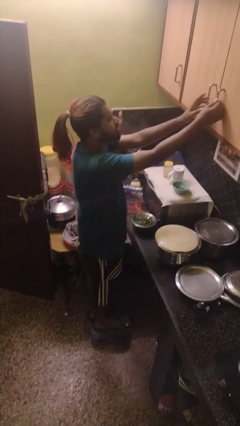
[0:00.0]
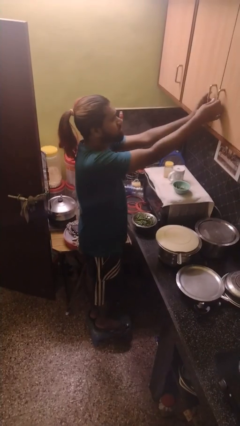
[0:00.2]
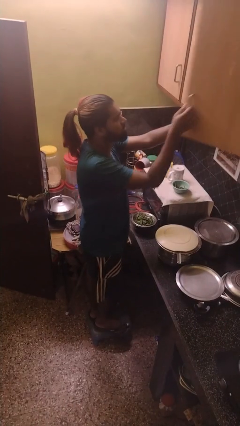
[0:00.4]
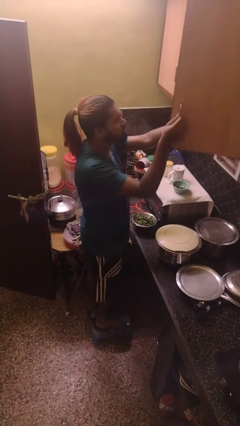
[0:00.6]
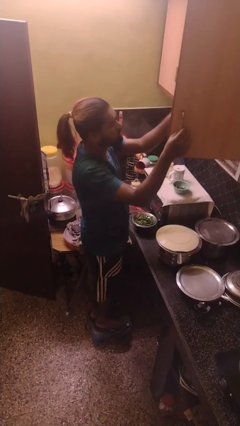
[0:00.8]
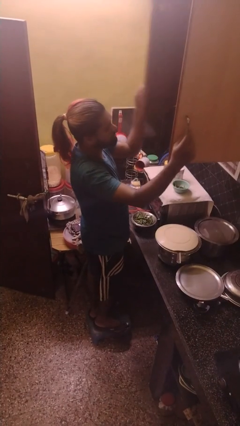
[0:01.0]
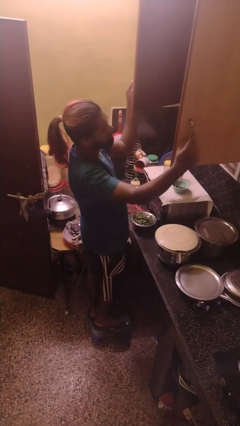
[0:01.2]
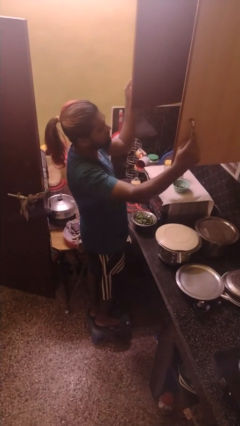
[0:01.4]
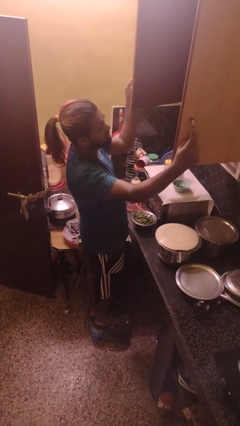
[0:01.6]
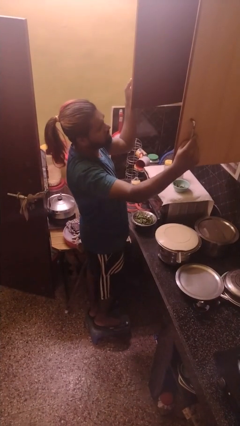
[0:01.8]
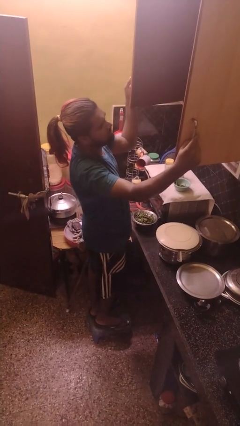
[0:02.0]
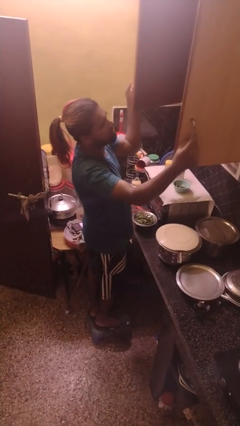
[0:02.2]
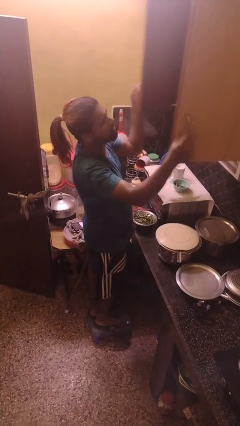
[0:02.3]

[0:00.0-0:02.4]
person opens cabinet

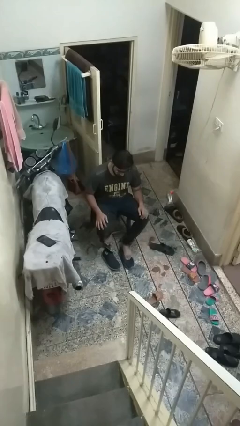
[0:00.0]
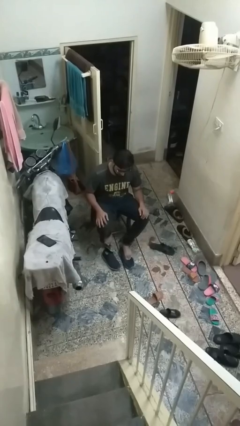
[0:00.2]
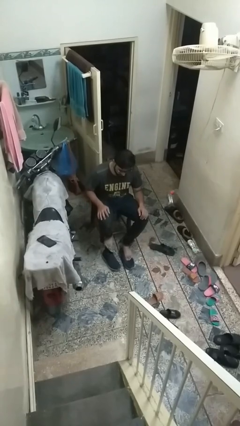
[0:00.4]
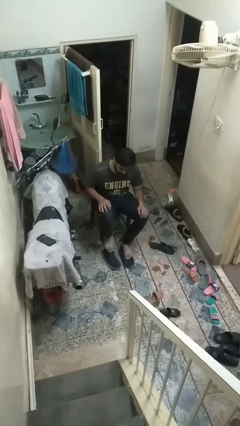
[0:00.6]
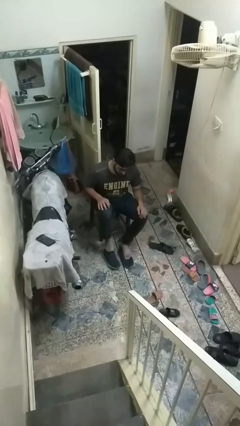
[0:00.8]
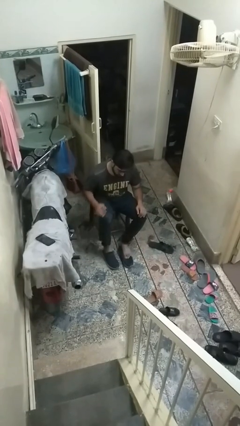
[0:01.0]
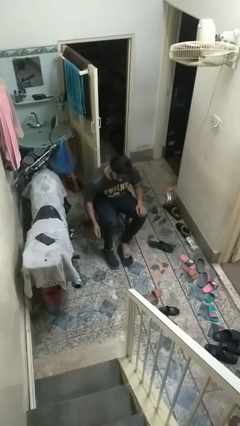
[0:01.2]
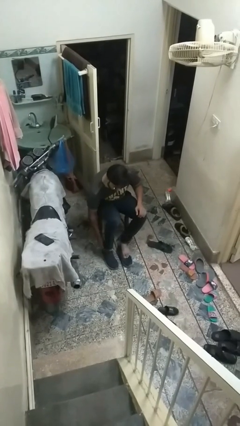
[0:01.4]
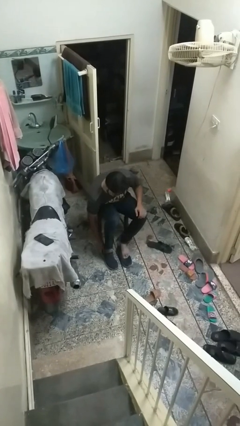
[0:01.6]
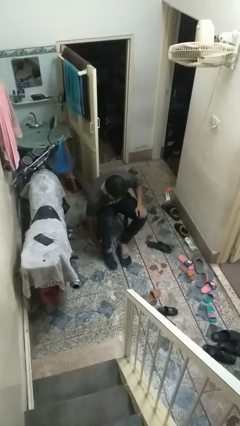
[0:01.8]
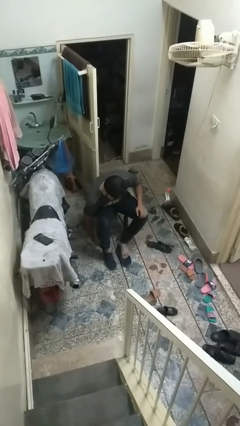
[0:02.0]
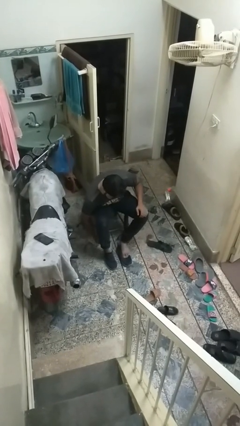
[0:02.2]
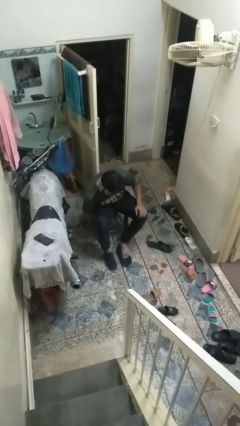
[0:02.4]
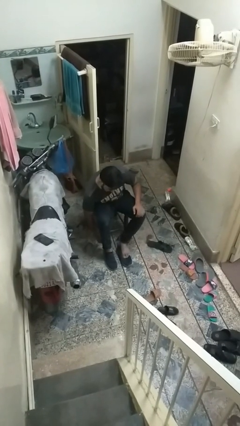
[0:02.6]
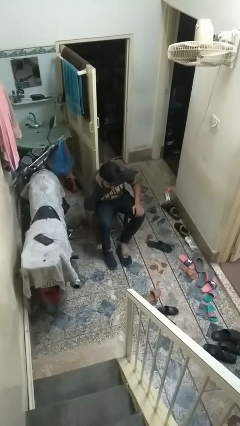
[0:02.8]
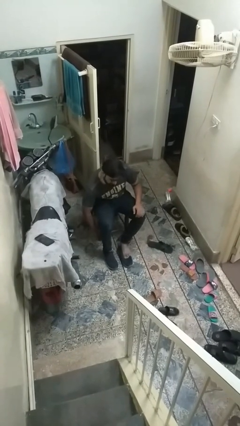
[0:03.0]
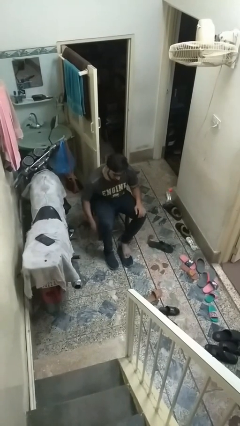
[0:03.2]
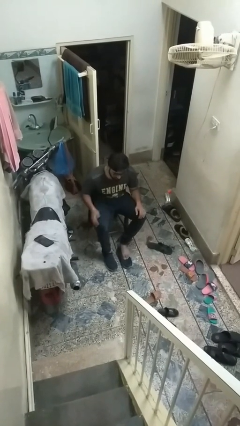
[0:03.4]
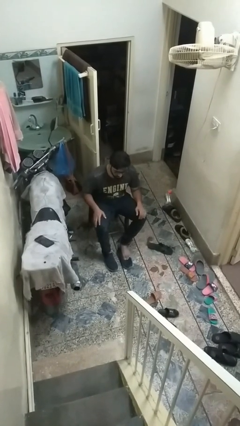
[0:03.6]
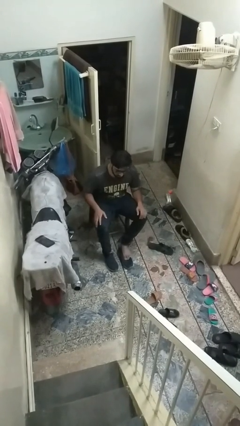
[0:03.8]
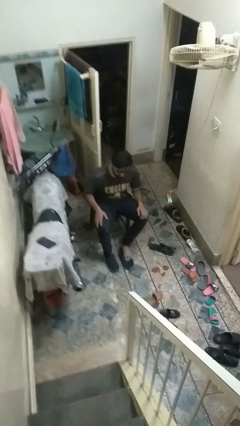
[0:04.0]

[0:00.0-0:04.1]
person puts on shoes

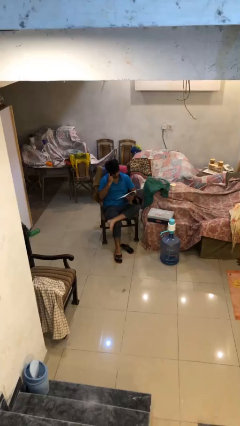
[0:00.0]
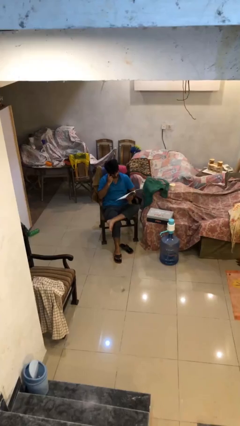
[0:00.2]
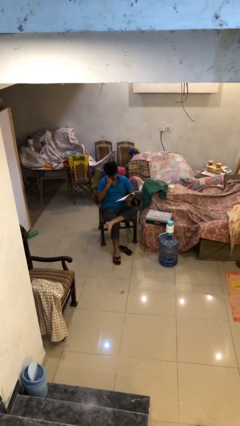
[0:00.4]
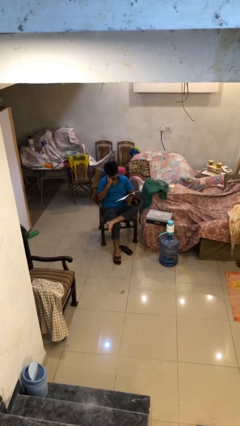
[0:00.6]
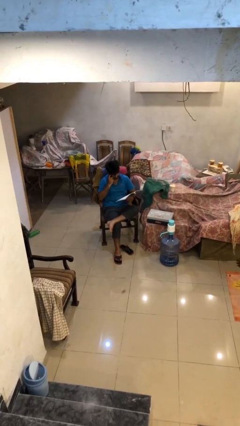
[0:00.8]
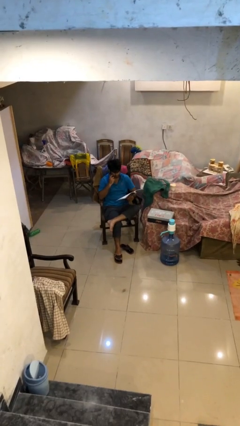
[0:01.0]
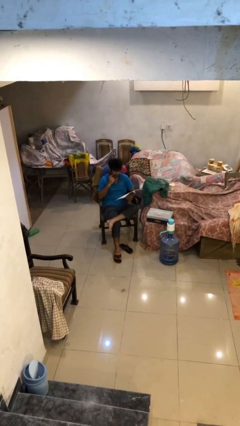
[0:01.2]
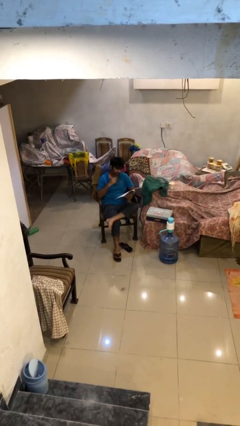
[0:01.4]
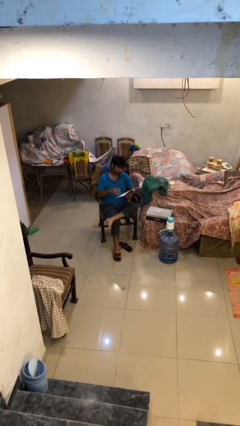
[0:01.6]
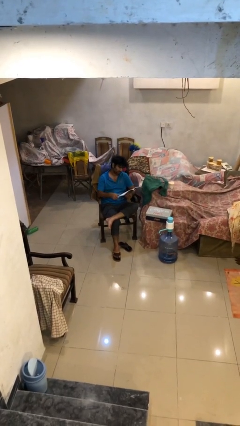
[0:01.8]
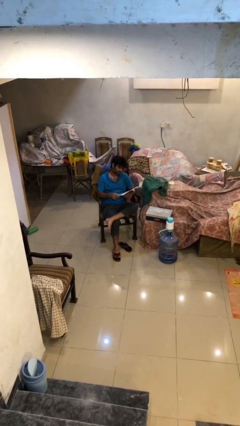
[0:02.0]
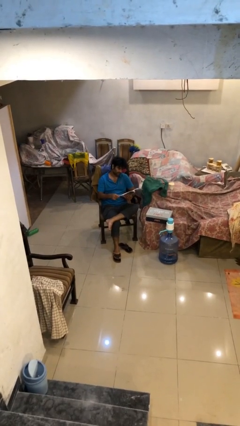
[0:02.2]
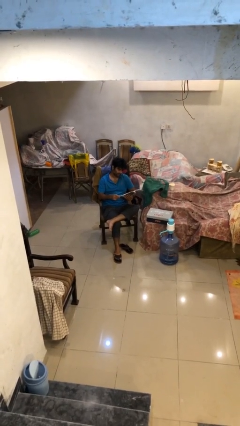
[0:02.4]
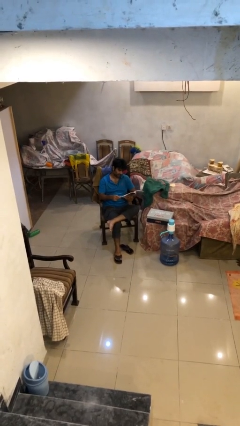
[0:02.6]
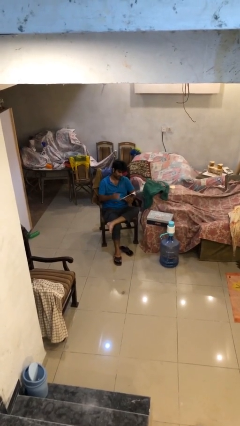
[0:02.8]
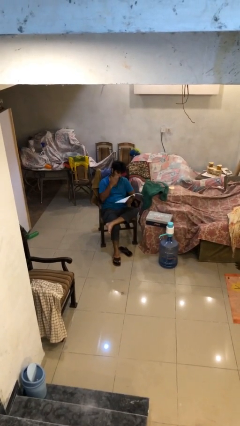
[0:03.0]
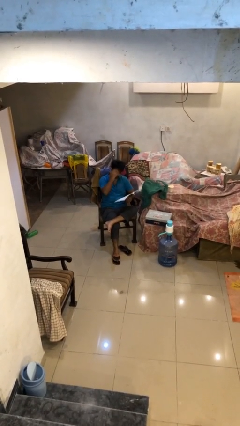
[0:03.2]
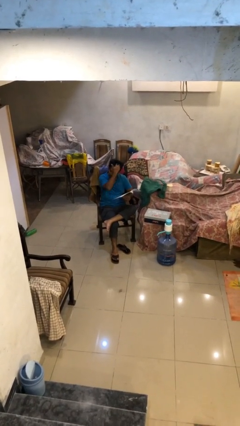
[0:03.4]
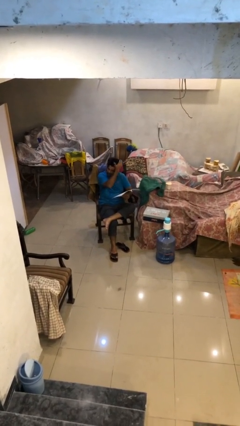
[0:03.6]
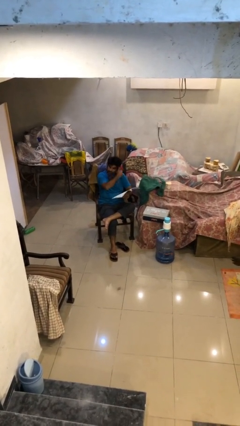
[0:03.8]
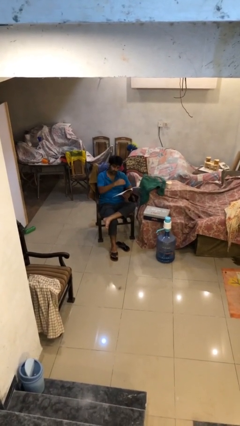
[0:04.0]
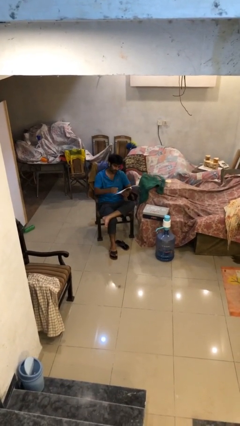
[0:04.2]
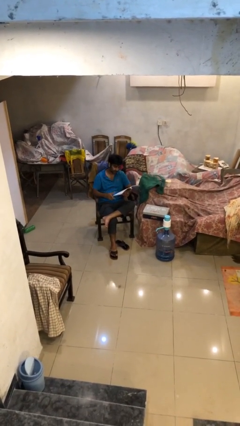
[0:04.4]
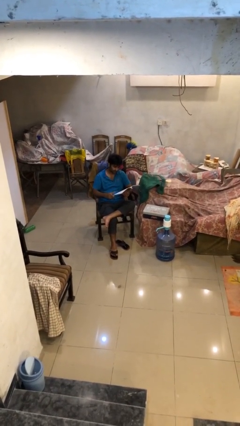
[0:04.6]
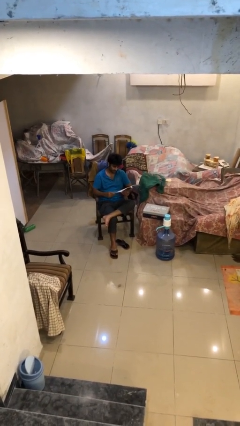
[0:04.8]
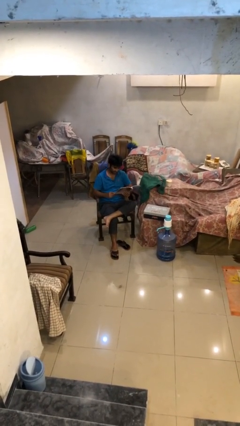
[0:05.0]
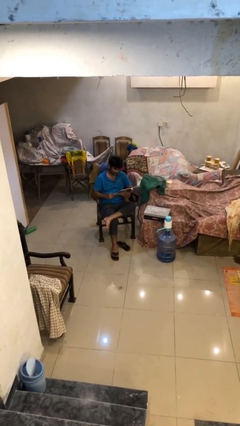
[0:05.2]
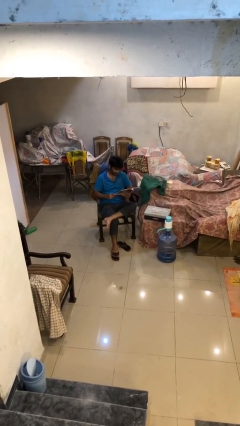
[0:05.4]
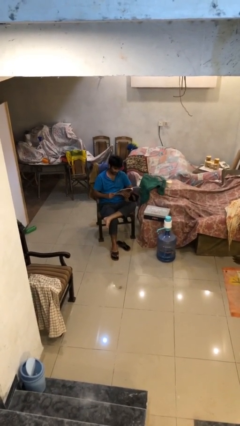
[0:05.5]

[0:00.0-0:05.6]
person reads document

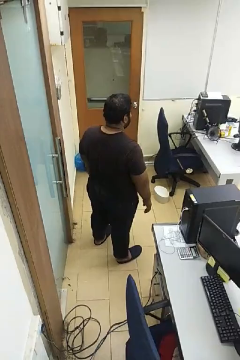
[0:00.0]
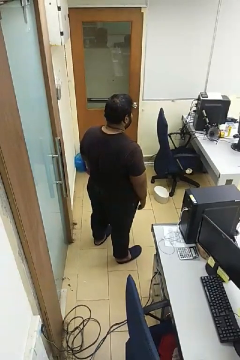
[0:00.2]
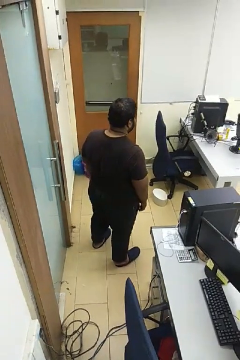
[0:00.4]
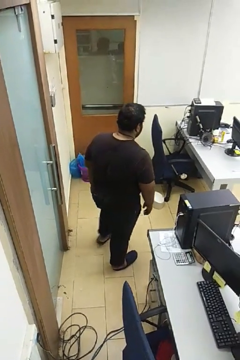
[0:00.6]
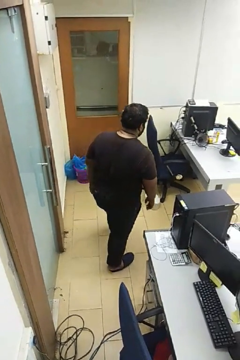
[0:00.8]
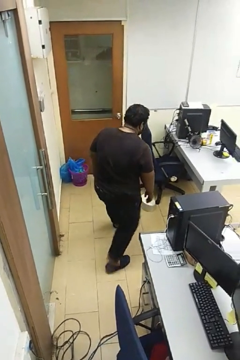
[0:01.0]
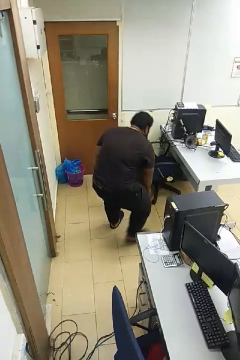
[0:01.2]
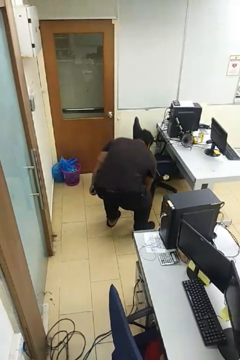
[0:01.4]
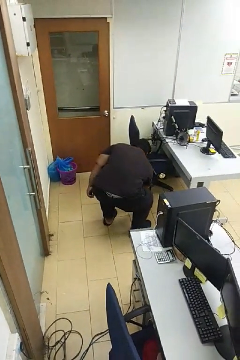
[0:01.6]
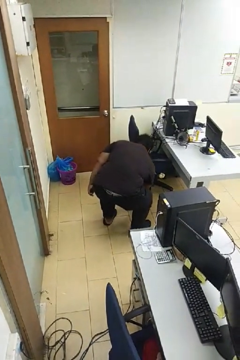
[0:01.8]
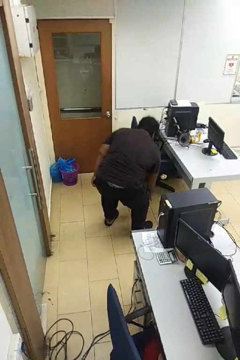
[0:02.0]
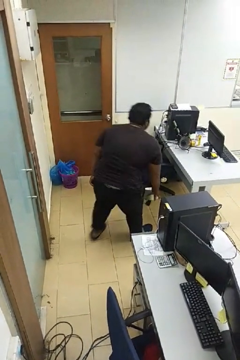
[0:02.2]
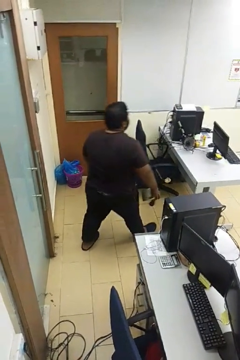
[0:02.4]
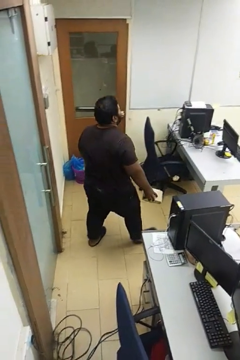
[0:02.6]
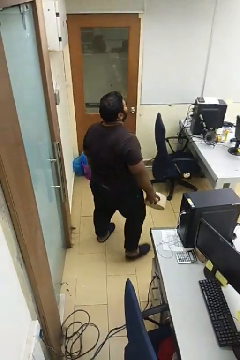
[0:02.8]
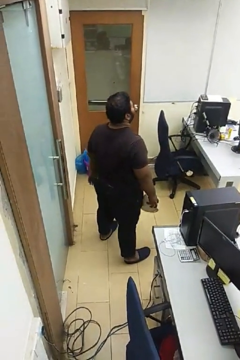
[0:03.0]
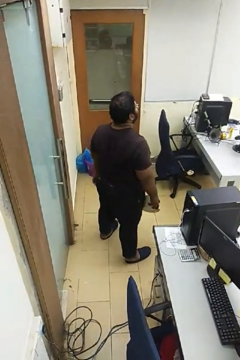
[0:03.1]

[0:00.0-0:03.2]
person picks up object from floor

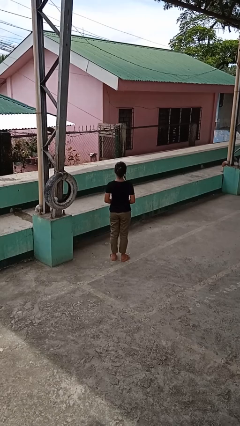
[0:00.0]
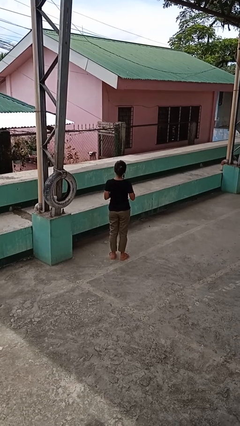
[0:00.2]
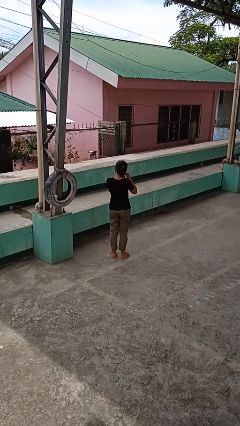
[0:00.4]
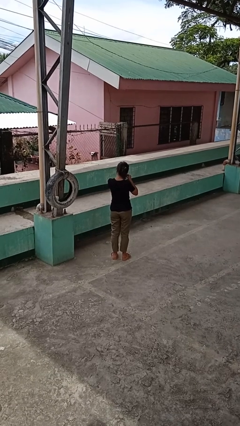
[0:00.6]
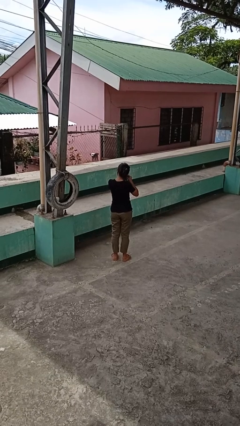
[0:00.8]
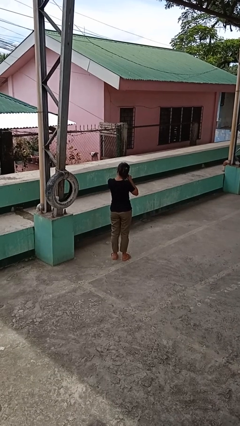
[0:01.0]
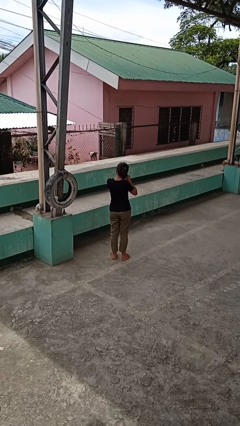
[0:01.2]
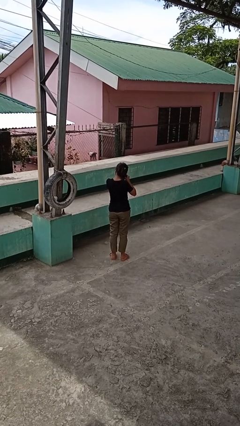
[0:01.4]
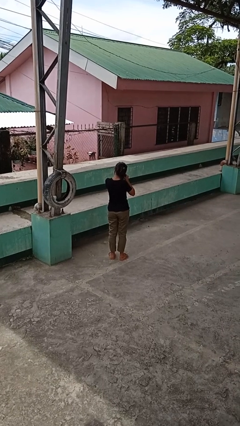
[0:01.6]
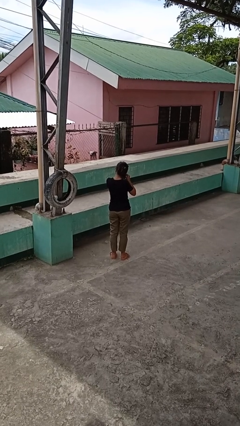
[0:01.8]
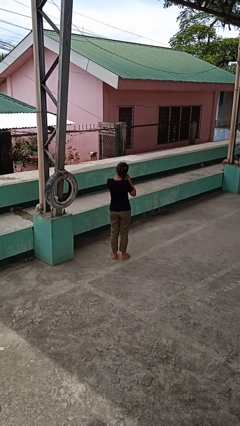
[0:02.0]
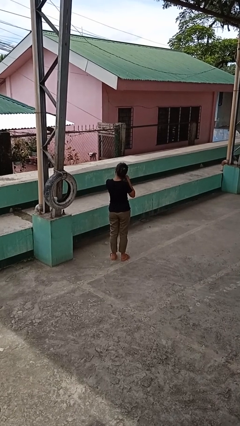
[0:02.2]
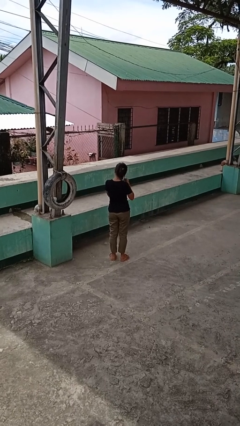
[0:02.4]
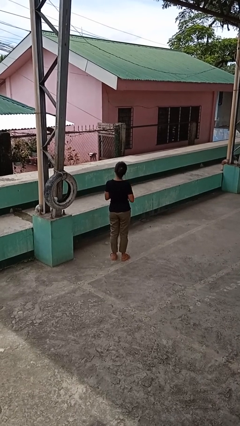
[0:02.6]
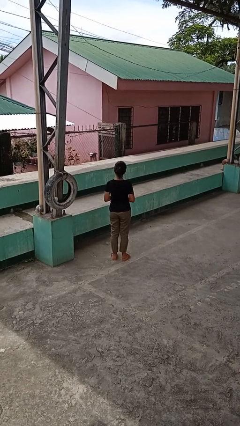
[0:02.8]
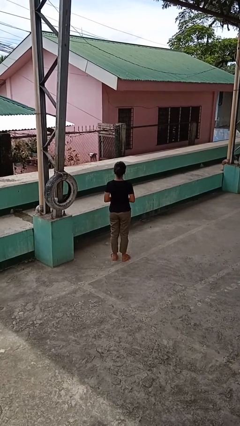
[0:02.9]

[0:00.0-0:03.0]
person takes off earrings

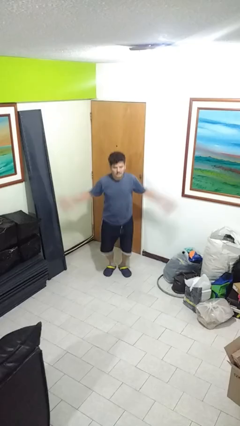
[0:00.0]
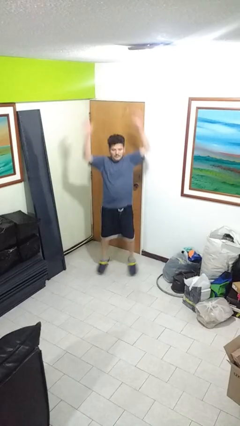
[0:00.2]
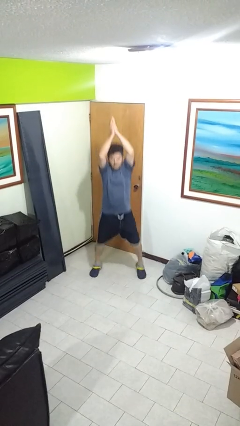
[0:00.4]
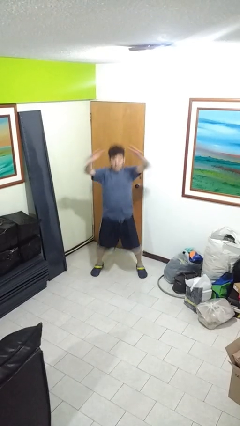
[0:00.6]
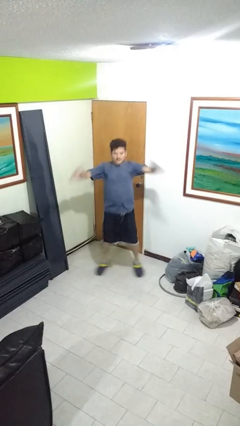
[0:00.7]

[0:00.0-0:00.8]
person exercises with jumping jacks
